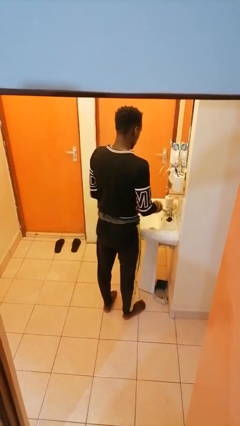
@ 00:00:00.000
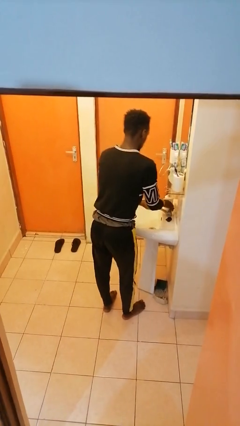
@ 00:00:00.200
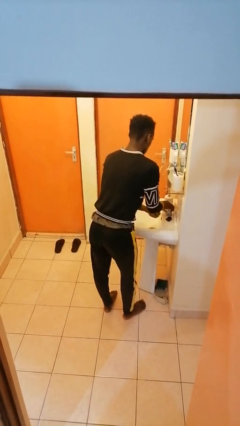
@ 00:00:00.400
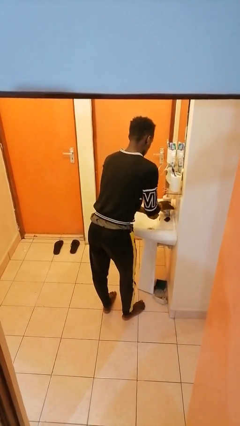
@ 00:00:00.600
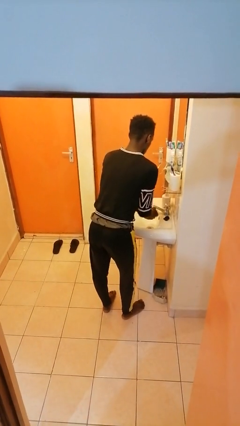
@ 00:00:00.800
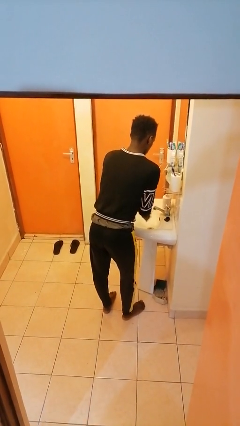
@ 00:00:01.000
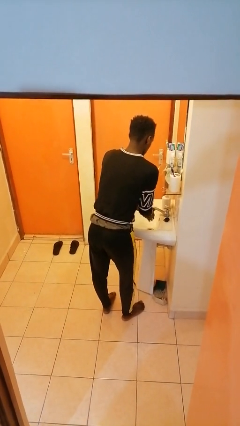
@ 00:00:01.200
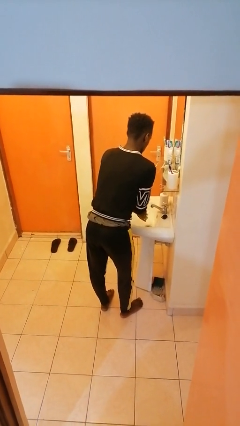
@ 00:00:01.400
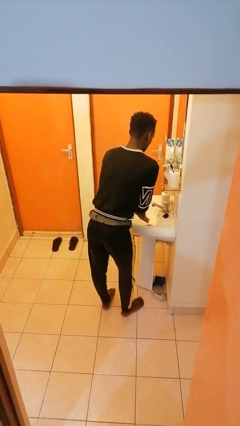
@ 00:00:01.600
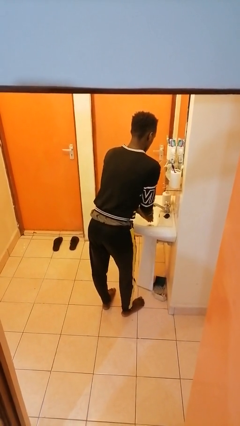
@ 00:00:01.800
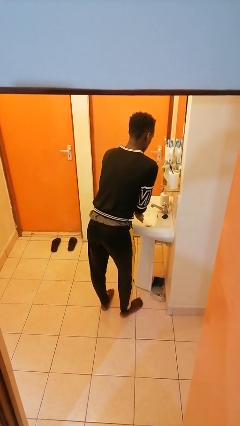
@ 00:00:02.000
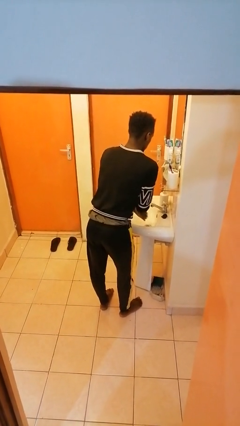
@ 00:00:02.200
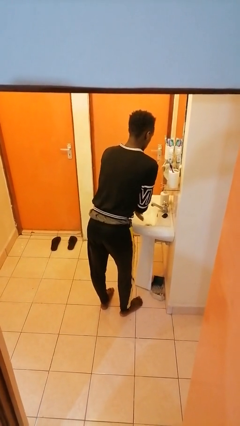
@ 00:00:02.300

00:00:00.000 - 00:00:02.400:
person washes hands

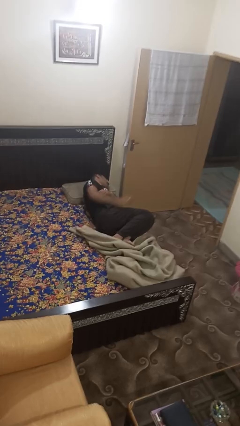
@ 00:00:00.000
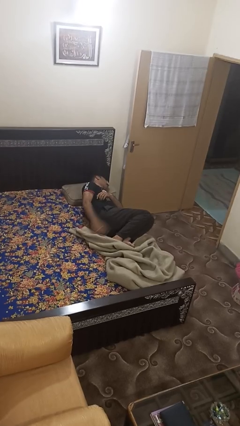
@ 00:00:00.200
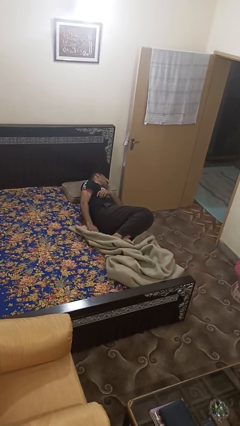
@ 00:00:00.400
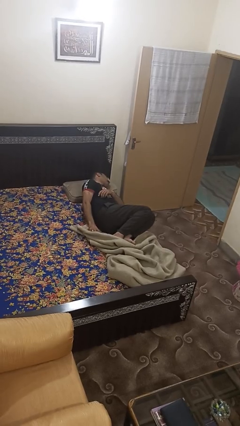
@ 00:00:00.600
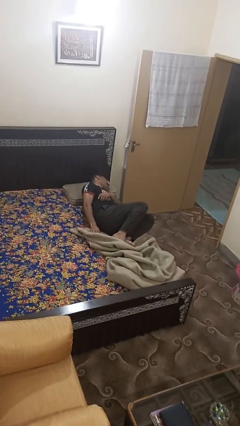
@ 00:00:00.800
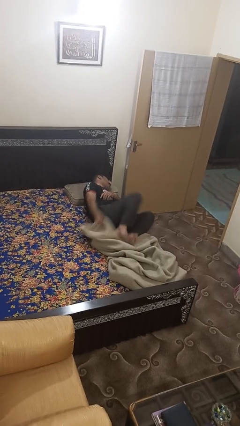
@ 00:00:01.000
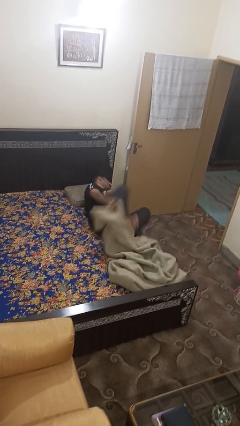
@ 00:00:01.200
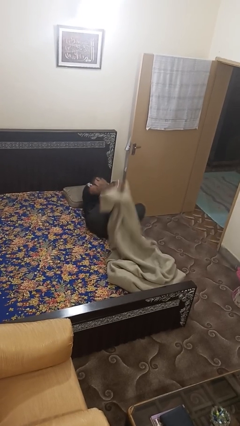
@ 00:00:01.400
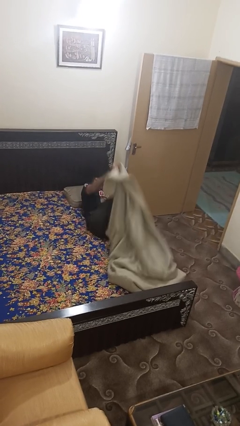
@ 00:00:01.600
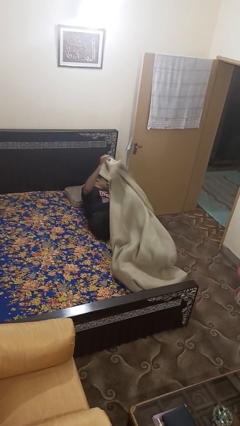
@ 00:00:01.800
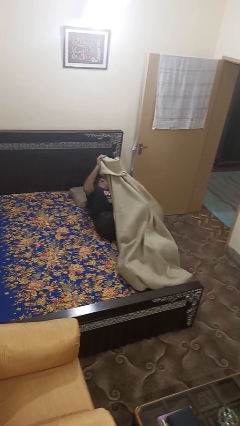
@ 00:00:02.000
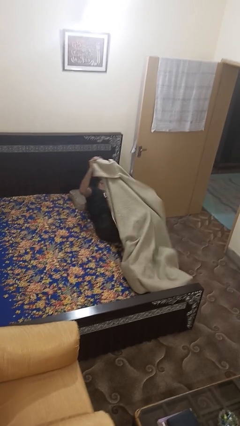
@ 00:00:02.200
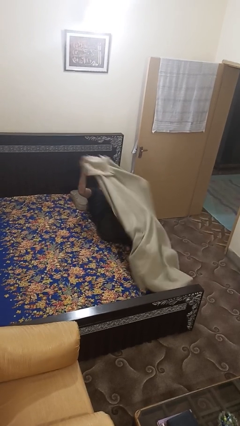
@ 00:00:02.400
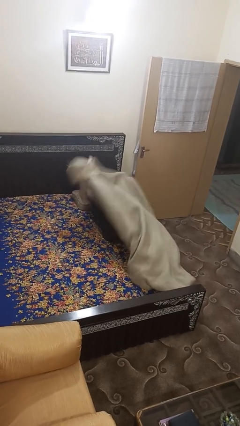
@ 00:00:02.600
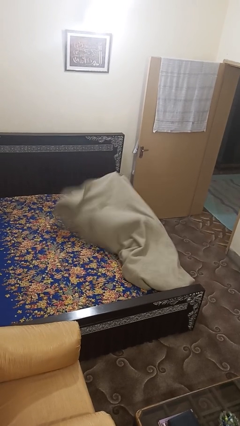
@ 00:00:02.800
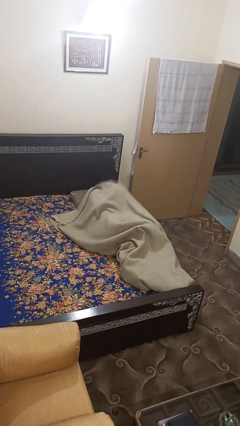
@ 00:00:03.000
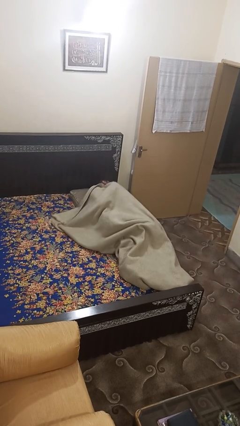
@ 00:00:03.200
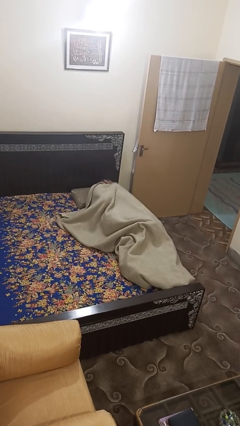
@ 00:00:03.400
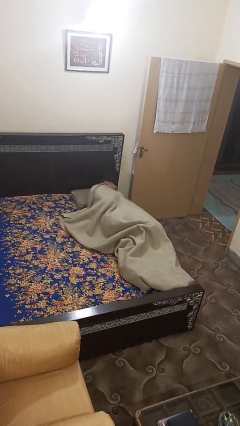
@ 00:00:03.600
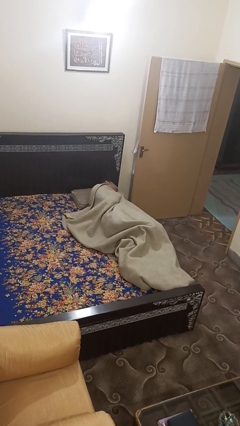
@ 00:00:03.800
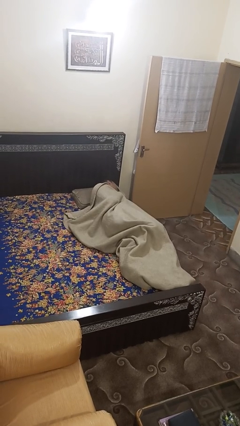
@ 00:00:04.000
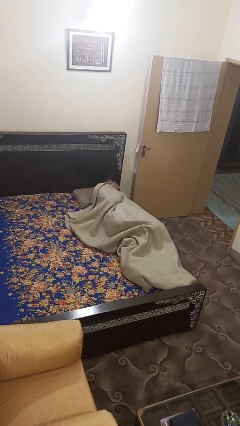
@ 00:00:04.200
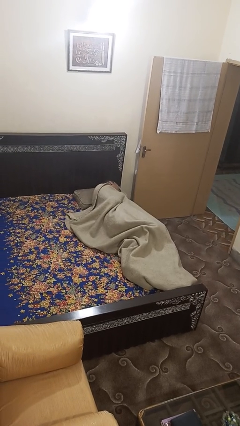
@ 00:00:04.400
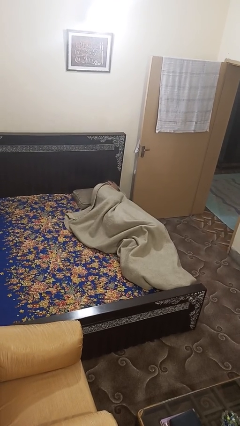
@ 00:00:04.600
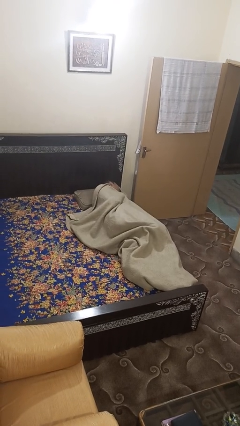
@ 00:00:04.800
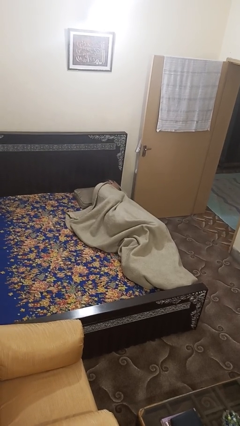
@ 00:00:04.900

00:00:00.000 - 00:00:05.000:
person covers with bedsheets

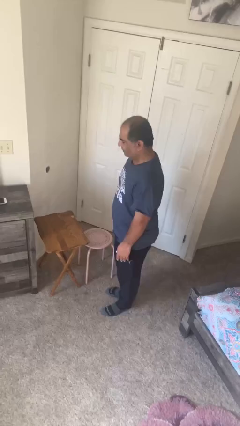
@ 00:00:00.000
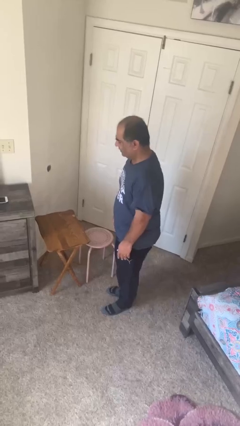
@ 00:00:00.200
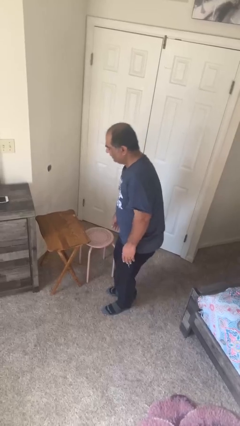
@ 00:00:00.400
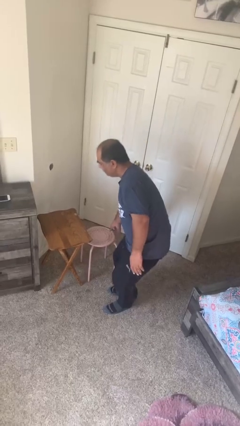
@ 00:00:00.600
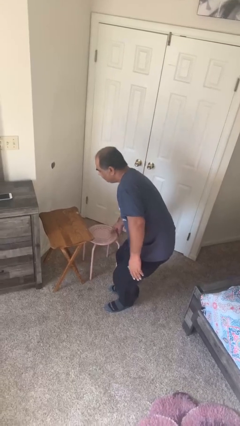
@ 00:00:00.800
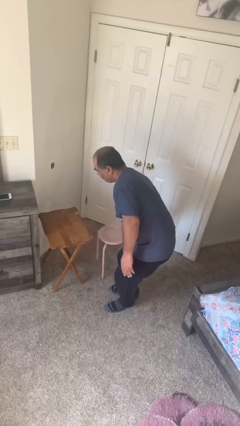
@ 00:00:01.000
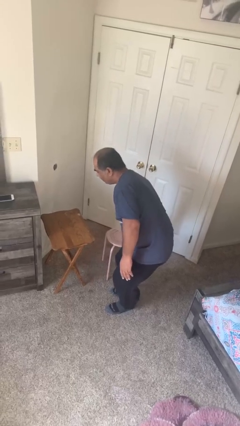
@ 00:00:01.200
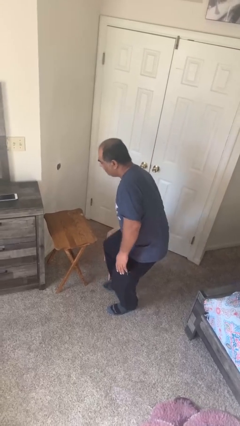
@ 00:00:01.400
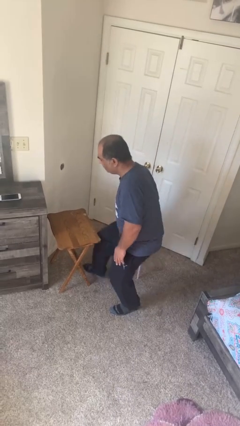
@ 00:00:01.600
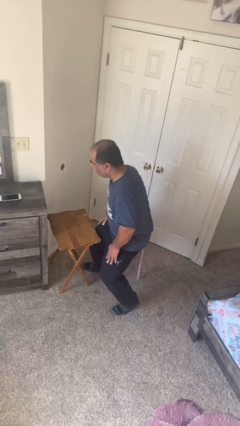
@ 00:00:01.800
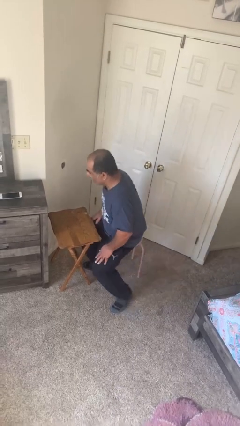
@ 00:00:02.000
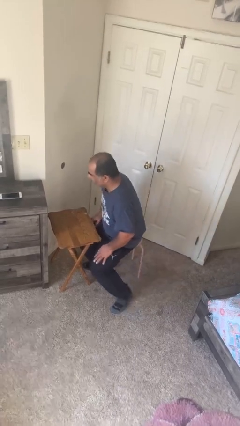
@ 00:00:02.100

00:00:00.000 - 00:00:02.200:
person sits down

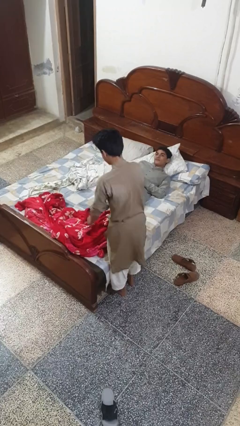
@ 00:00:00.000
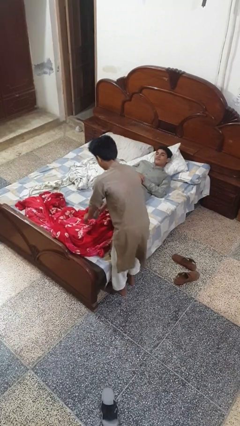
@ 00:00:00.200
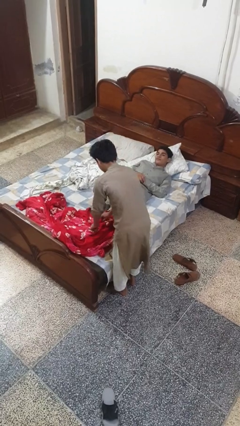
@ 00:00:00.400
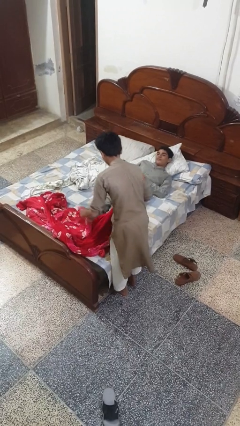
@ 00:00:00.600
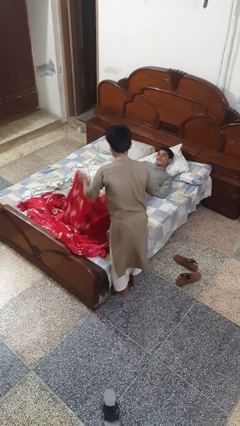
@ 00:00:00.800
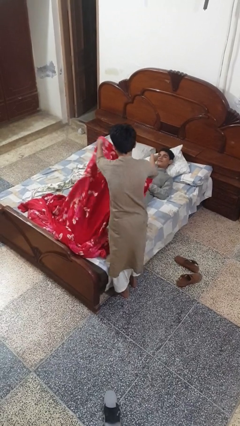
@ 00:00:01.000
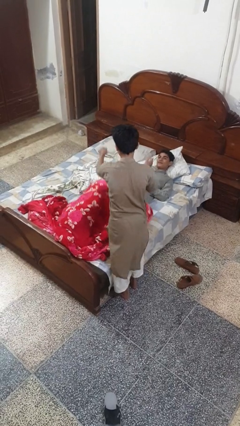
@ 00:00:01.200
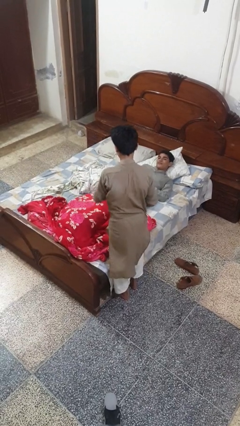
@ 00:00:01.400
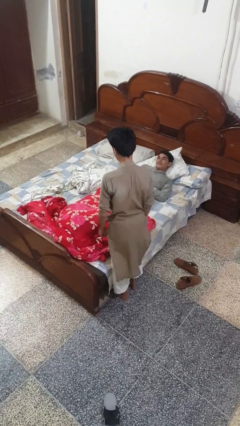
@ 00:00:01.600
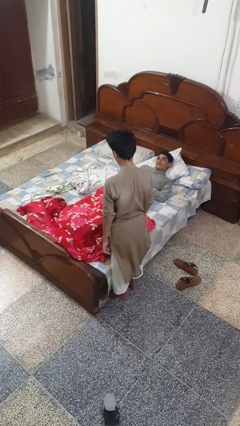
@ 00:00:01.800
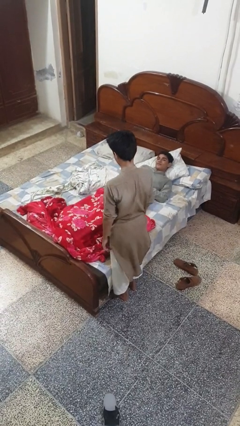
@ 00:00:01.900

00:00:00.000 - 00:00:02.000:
person covers friend with blanket

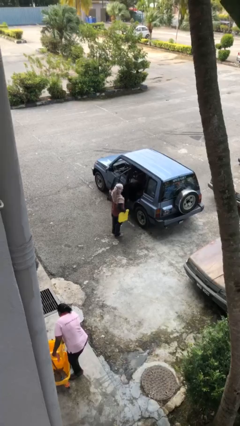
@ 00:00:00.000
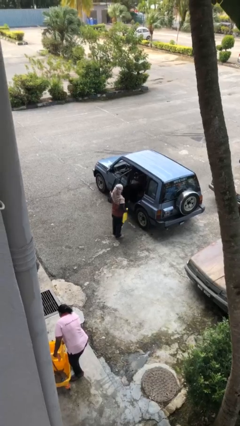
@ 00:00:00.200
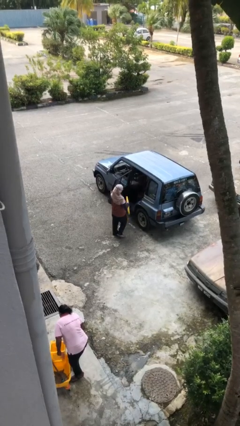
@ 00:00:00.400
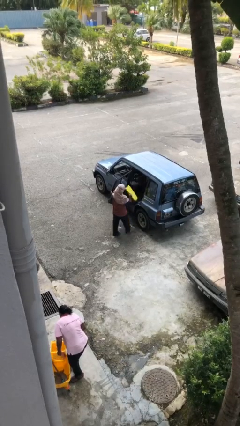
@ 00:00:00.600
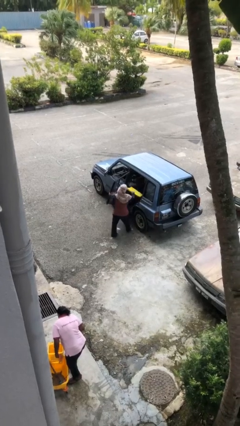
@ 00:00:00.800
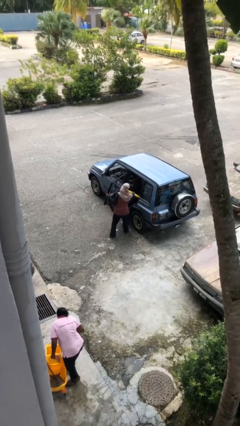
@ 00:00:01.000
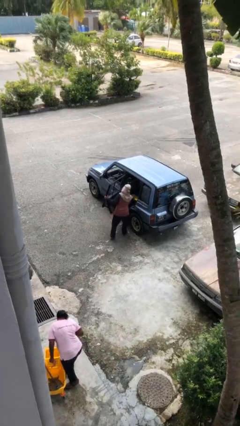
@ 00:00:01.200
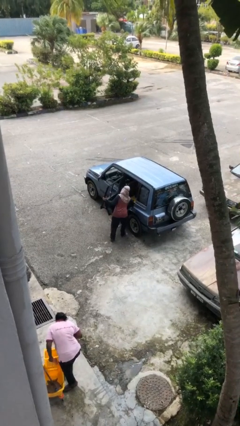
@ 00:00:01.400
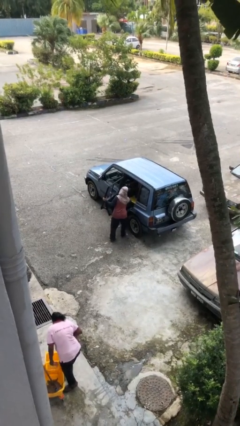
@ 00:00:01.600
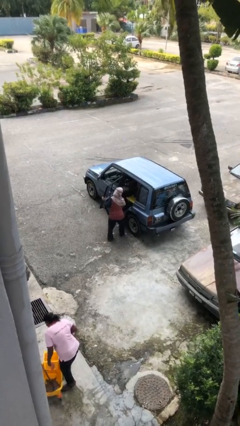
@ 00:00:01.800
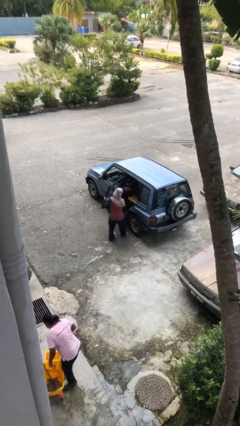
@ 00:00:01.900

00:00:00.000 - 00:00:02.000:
person loads car

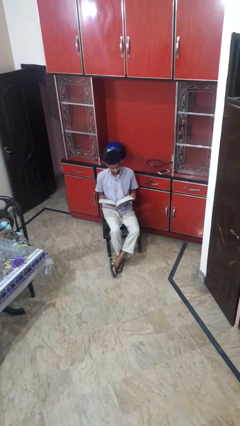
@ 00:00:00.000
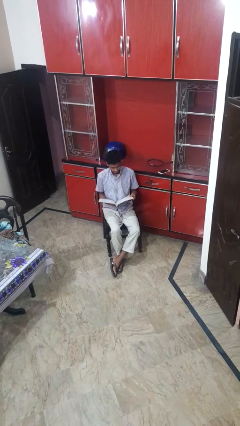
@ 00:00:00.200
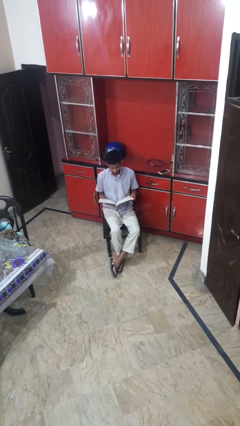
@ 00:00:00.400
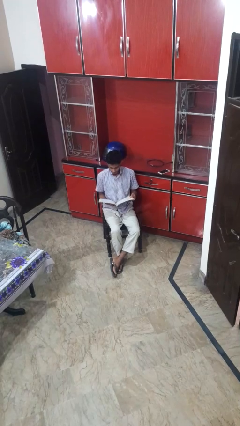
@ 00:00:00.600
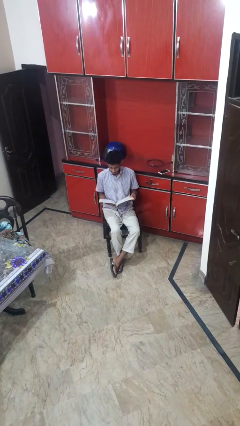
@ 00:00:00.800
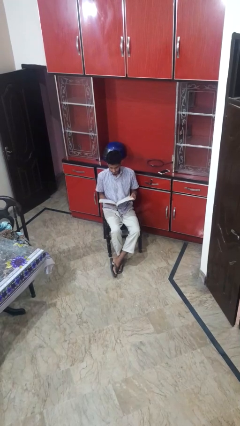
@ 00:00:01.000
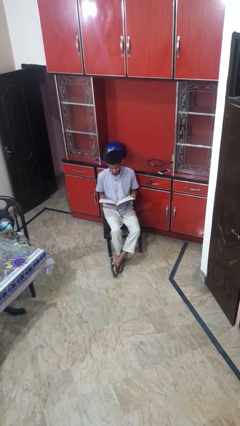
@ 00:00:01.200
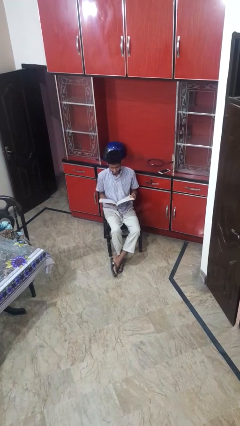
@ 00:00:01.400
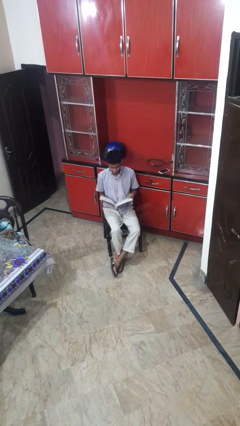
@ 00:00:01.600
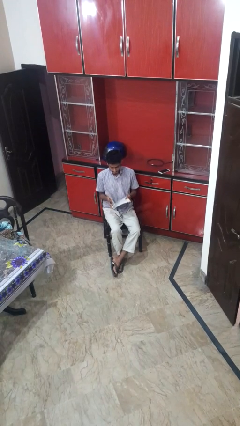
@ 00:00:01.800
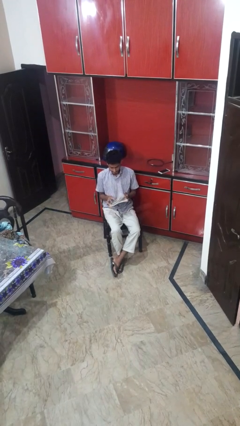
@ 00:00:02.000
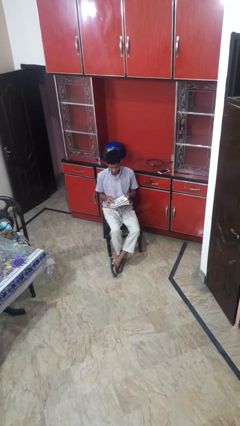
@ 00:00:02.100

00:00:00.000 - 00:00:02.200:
person reads magazine

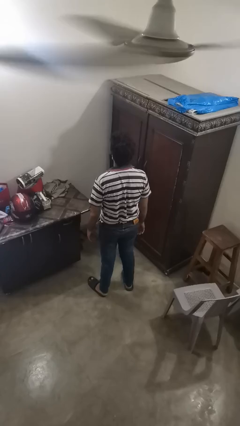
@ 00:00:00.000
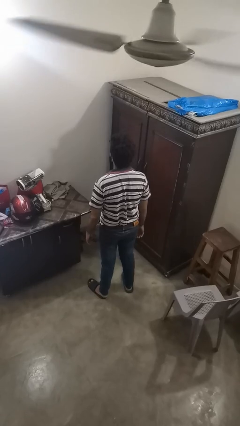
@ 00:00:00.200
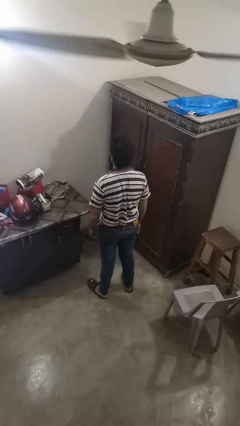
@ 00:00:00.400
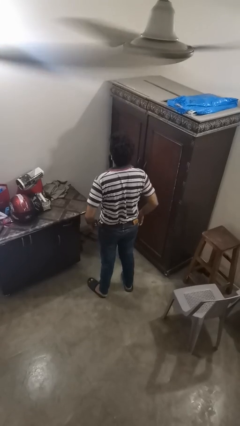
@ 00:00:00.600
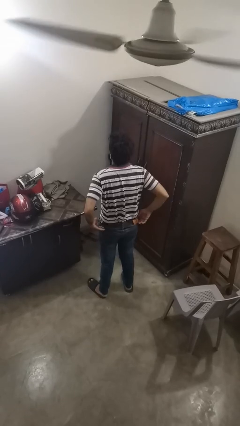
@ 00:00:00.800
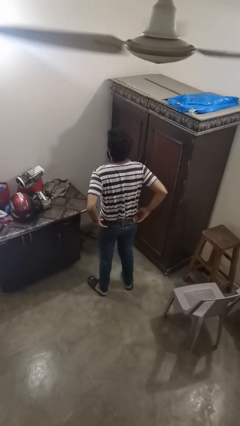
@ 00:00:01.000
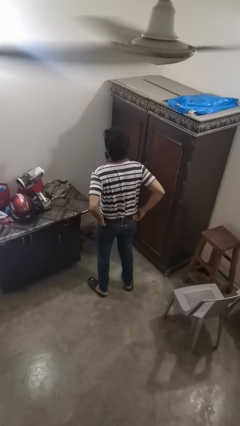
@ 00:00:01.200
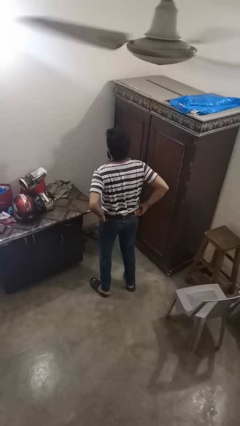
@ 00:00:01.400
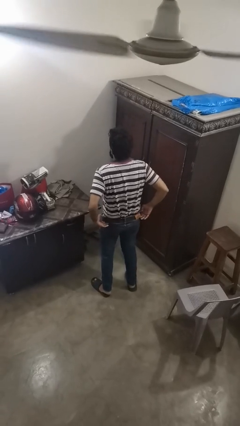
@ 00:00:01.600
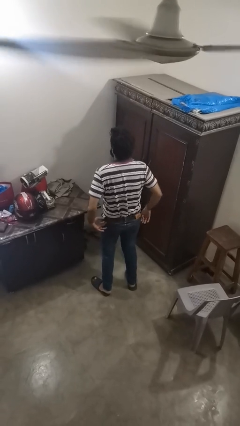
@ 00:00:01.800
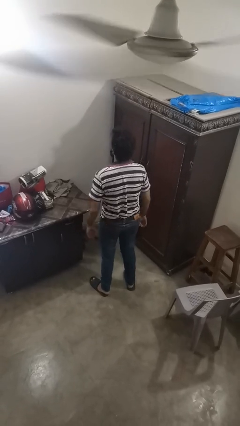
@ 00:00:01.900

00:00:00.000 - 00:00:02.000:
person hikes up pants
